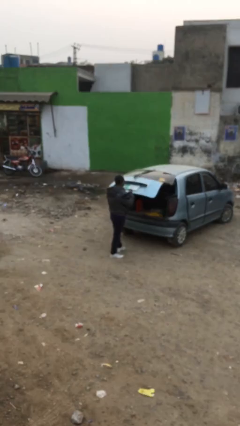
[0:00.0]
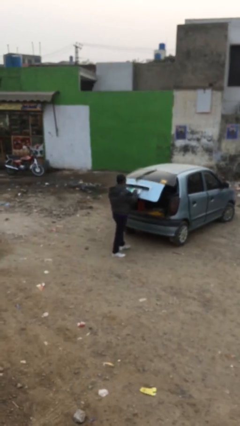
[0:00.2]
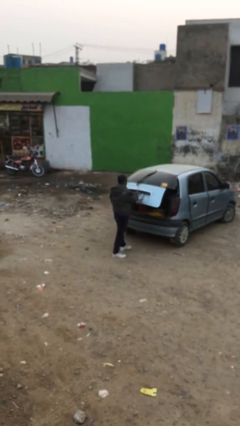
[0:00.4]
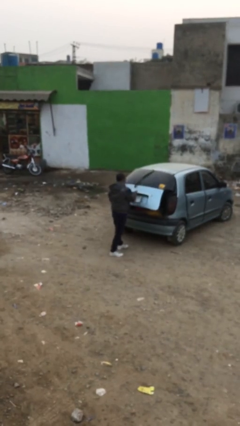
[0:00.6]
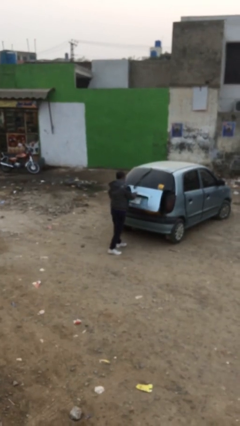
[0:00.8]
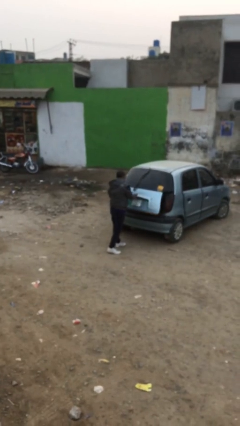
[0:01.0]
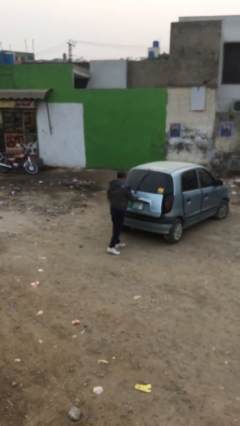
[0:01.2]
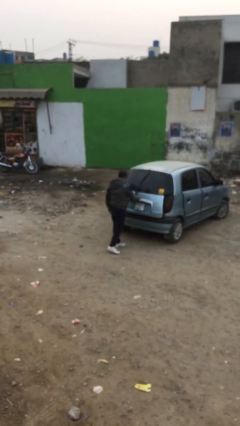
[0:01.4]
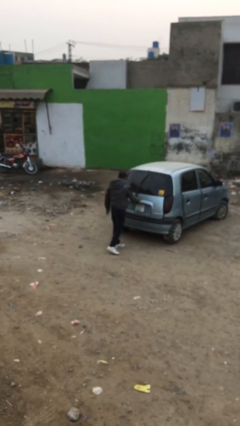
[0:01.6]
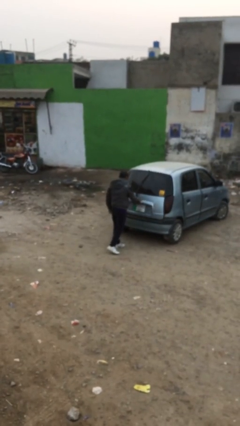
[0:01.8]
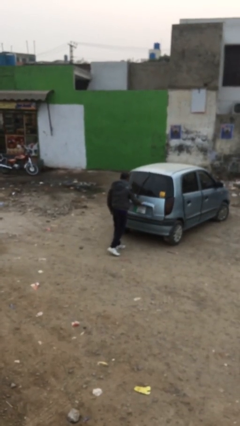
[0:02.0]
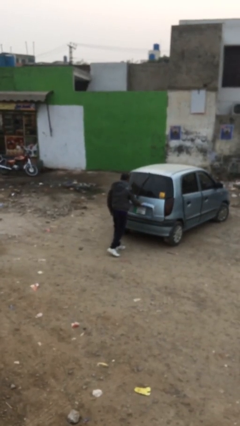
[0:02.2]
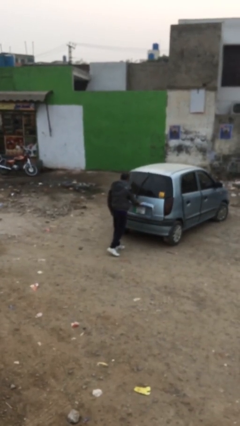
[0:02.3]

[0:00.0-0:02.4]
person closes car trunk

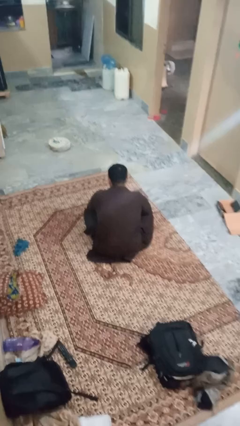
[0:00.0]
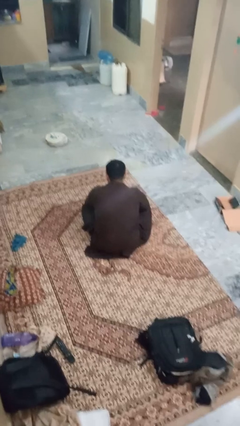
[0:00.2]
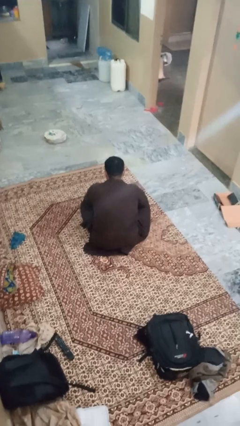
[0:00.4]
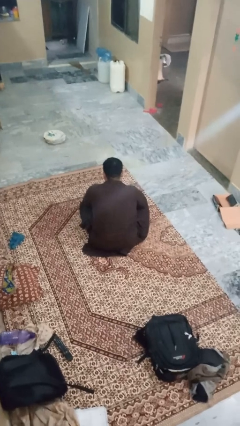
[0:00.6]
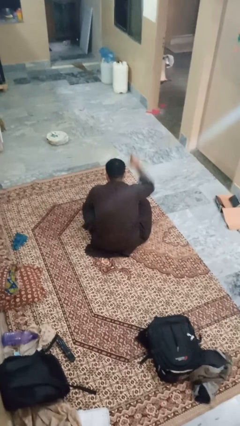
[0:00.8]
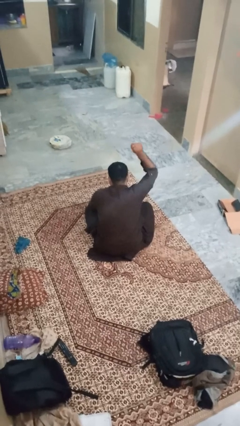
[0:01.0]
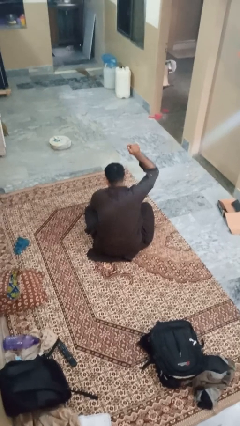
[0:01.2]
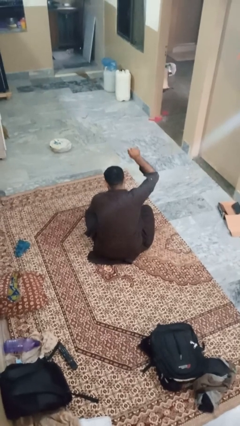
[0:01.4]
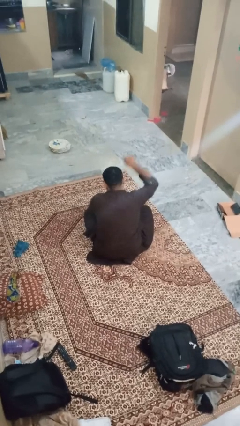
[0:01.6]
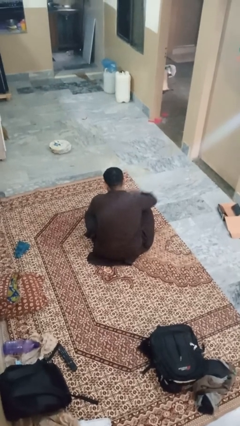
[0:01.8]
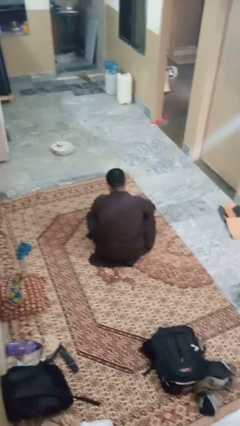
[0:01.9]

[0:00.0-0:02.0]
person gestures number one

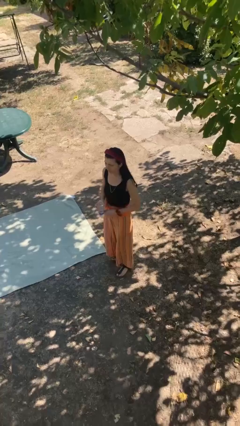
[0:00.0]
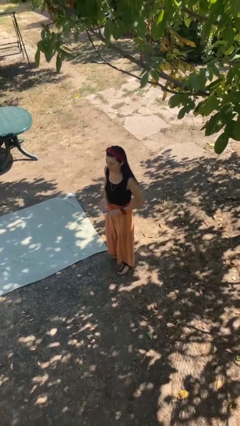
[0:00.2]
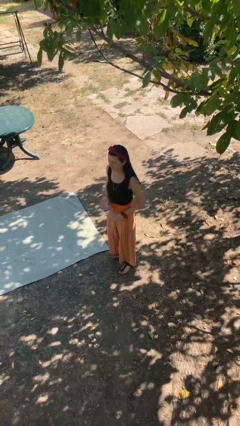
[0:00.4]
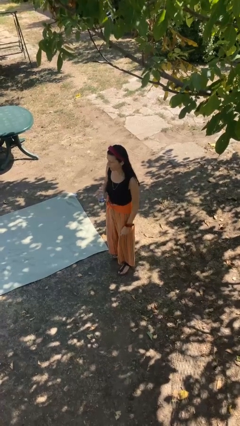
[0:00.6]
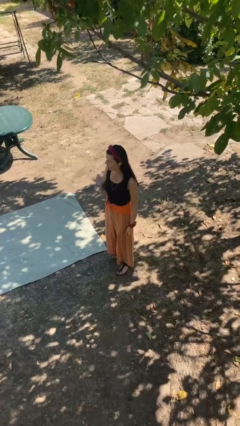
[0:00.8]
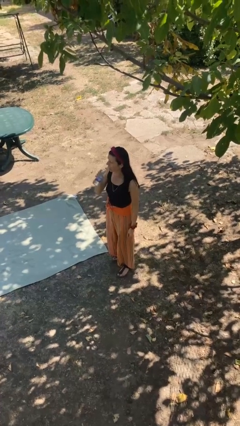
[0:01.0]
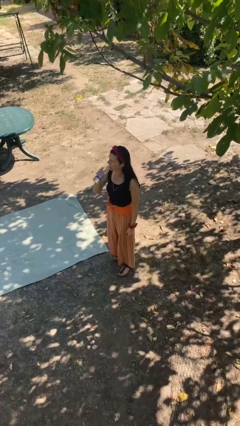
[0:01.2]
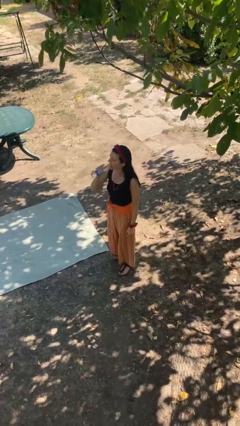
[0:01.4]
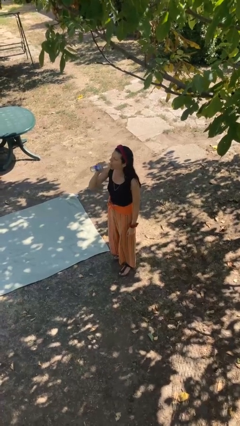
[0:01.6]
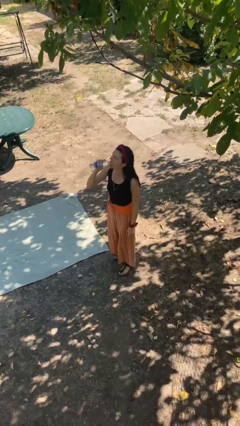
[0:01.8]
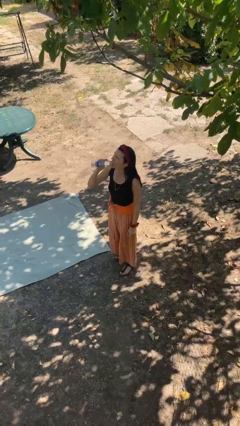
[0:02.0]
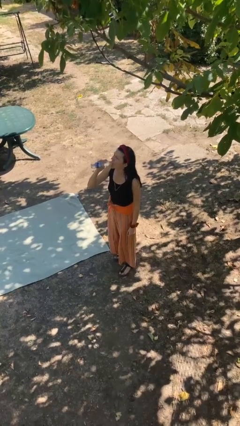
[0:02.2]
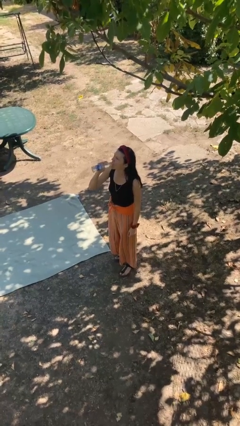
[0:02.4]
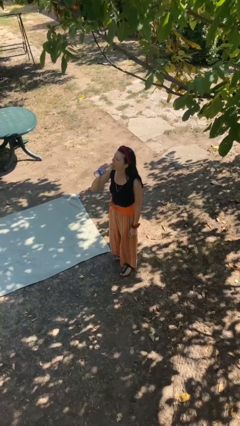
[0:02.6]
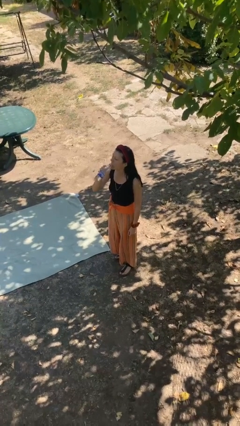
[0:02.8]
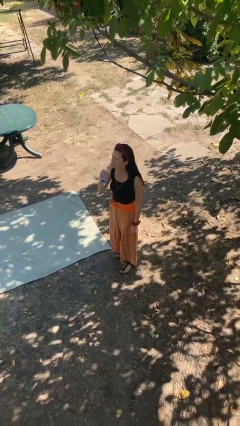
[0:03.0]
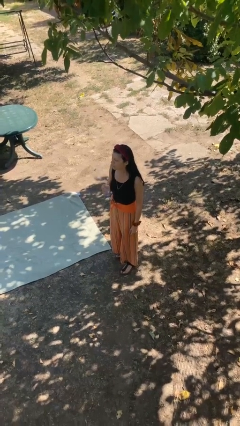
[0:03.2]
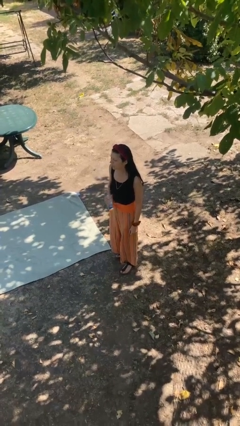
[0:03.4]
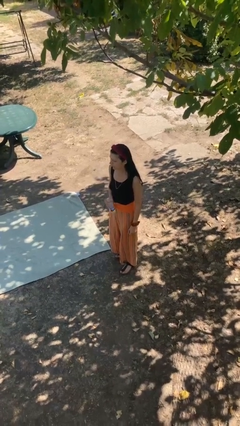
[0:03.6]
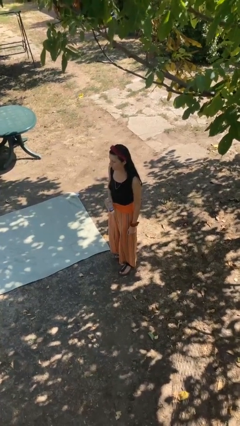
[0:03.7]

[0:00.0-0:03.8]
person drinks from bottle

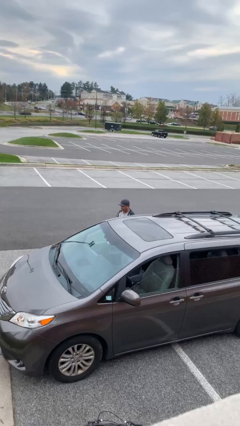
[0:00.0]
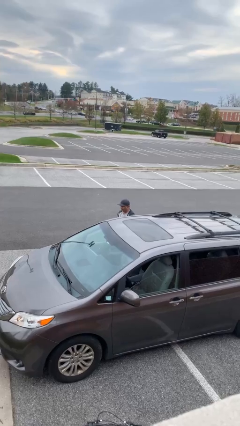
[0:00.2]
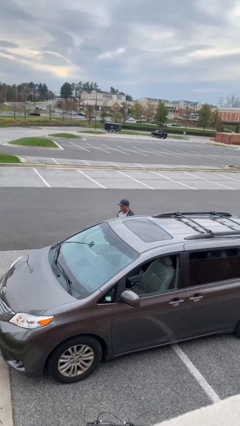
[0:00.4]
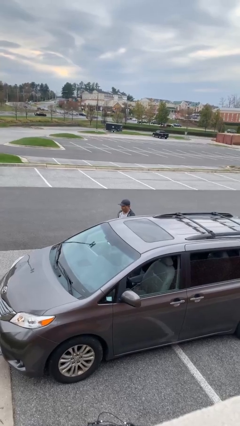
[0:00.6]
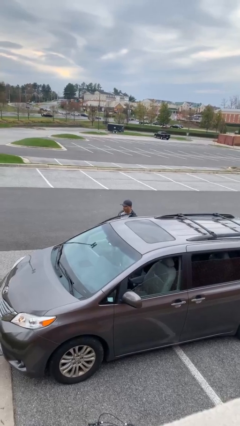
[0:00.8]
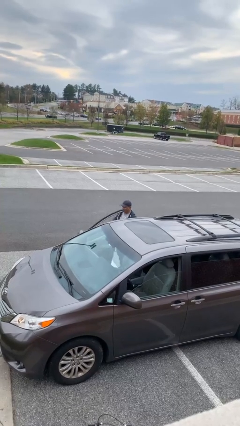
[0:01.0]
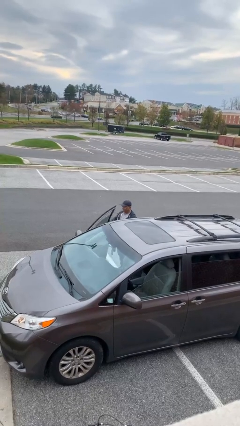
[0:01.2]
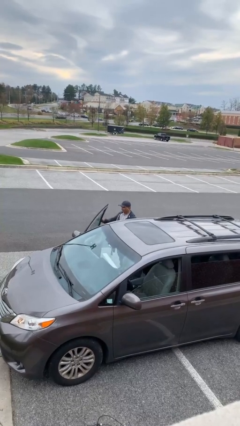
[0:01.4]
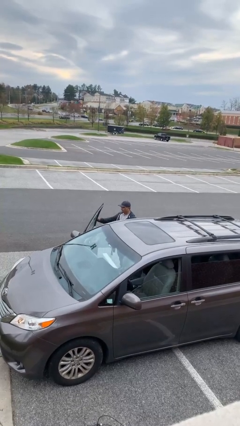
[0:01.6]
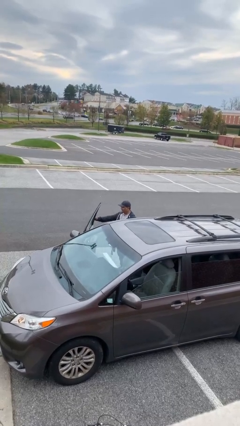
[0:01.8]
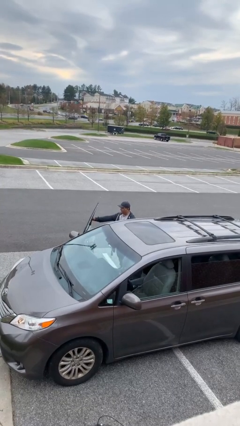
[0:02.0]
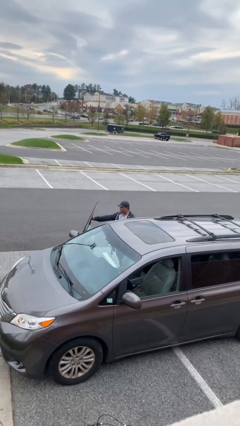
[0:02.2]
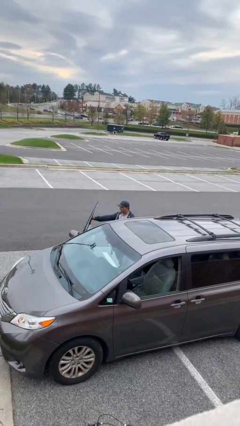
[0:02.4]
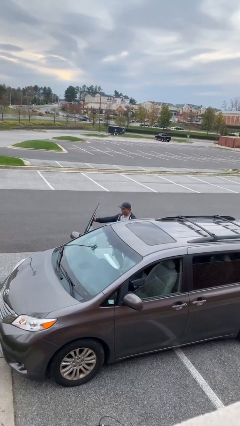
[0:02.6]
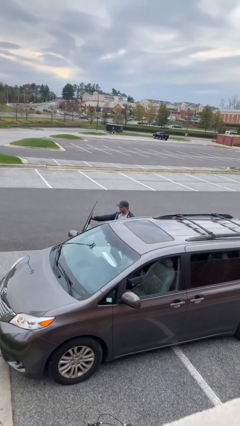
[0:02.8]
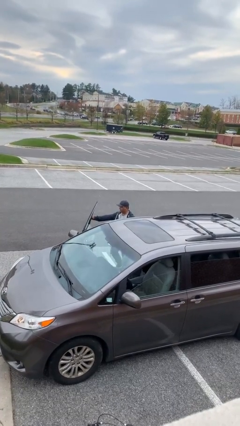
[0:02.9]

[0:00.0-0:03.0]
person opens car door

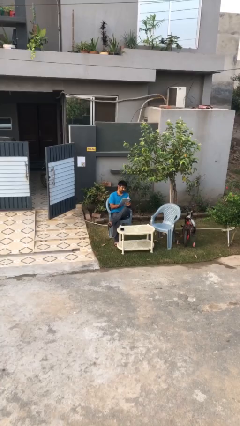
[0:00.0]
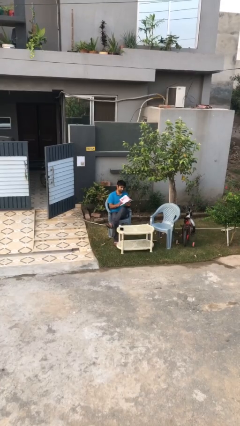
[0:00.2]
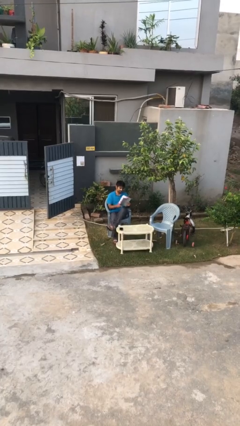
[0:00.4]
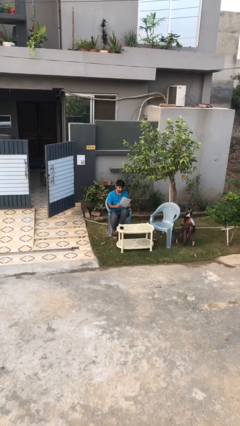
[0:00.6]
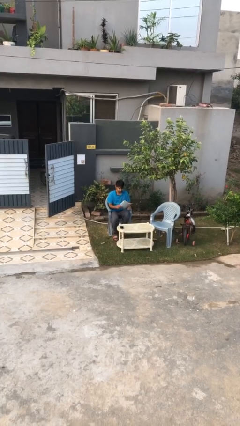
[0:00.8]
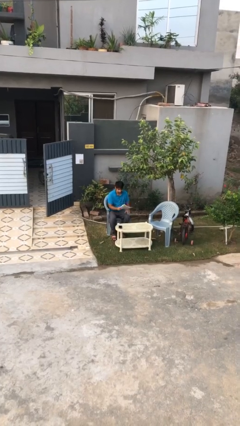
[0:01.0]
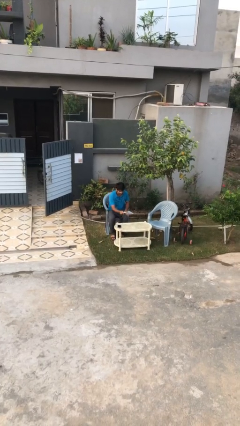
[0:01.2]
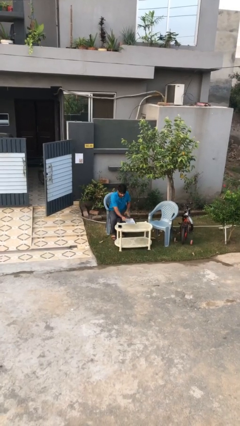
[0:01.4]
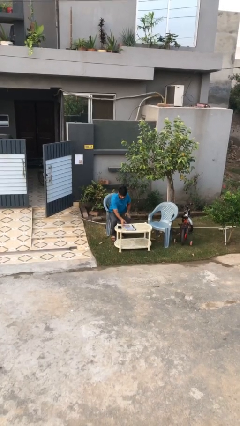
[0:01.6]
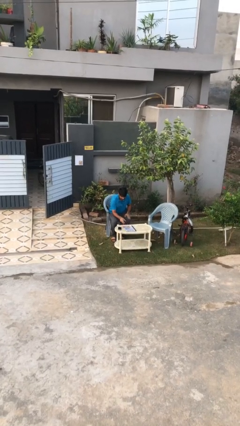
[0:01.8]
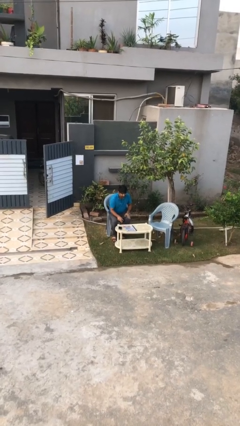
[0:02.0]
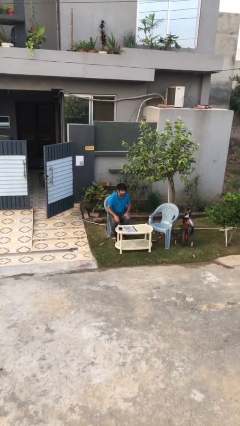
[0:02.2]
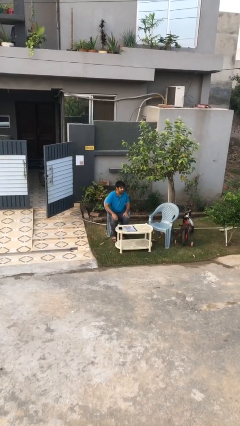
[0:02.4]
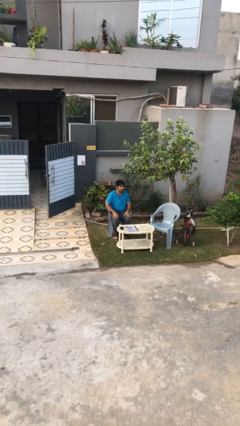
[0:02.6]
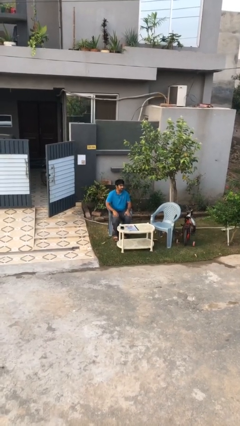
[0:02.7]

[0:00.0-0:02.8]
person puts down object on table

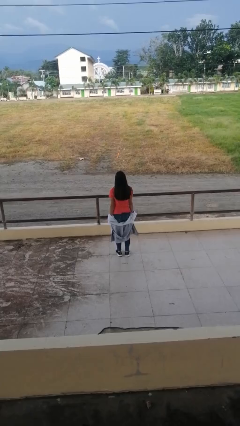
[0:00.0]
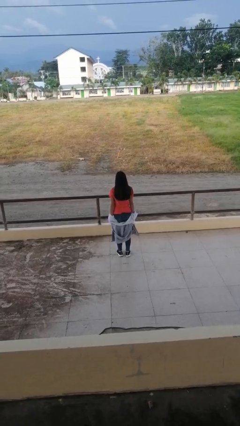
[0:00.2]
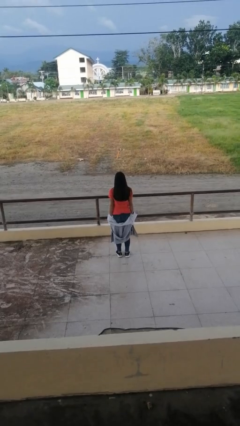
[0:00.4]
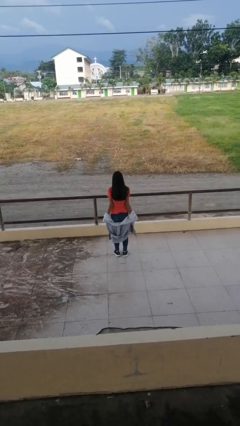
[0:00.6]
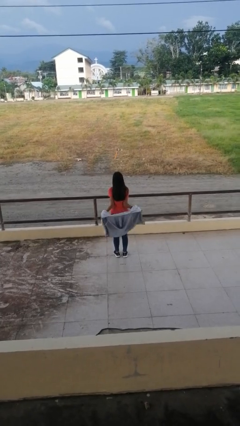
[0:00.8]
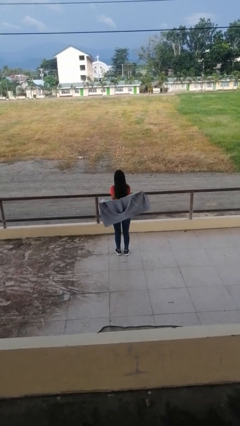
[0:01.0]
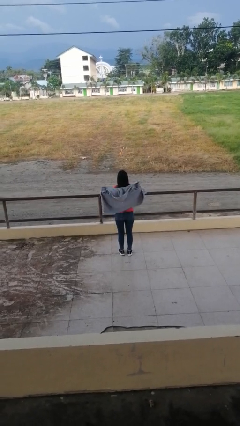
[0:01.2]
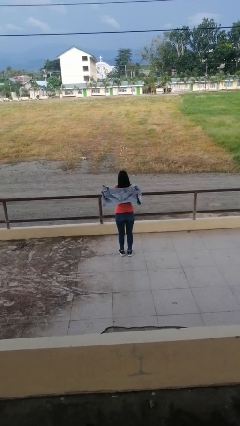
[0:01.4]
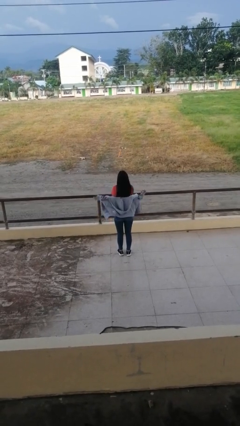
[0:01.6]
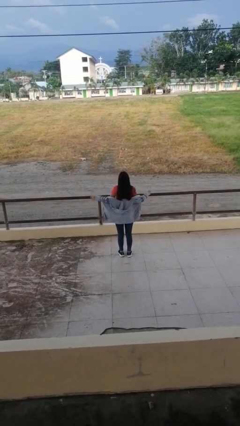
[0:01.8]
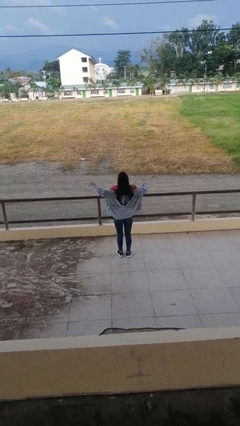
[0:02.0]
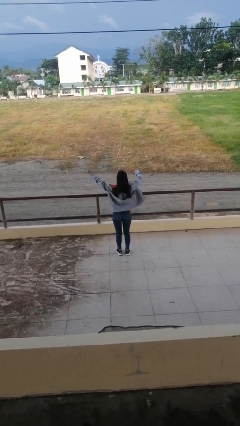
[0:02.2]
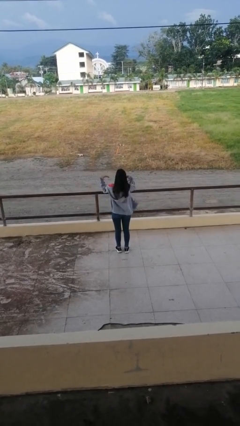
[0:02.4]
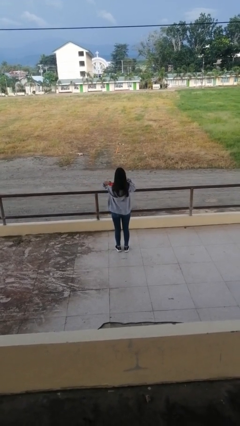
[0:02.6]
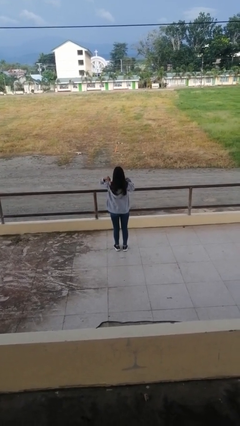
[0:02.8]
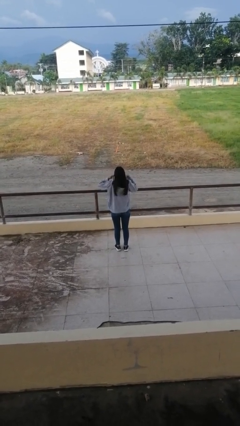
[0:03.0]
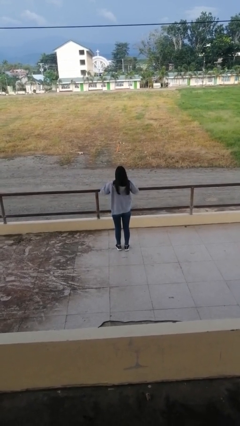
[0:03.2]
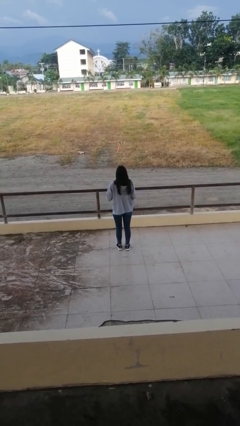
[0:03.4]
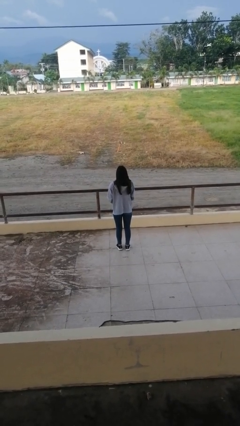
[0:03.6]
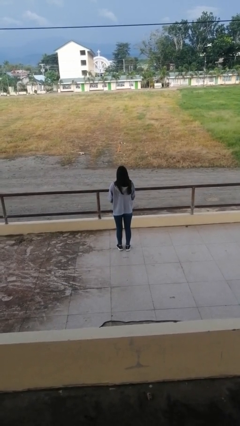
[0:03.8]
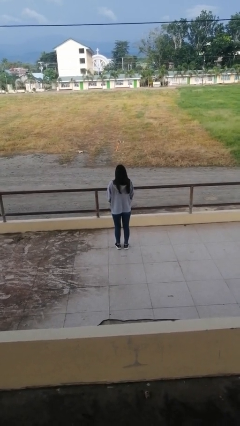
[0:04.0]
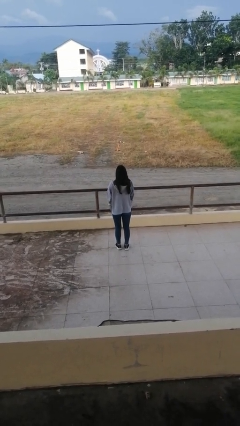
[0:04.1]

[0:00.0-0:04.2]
person puts on jacket
